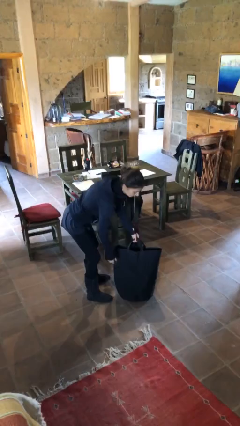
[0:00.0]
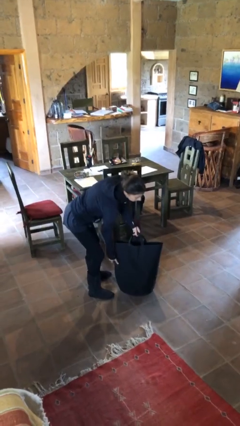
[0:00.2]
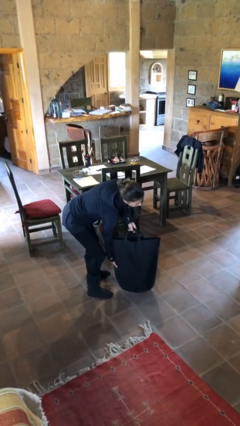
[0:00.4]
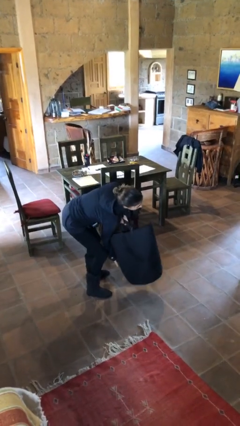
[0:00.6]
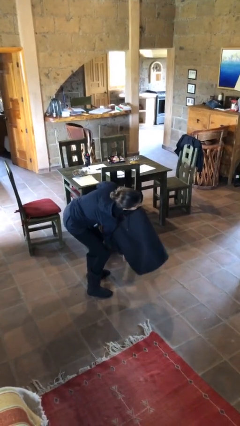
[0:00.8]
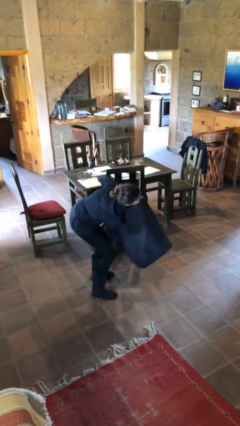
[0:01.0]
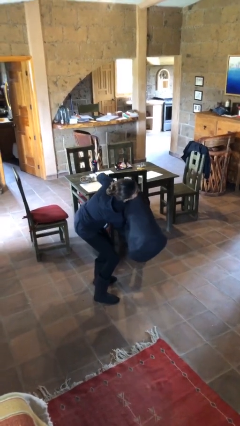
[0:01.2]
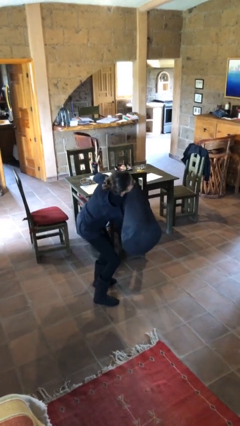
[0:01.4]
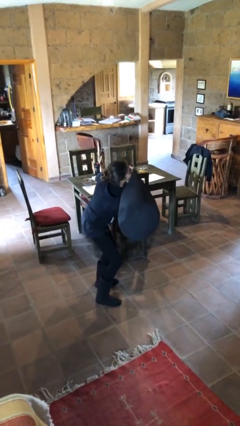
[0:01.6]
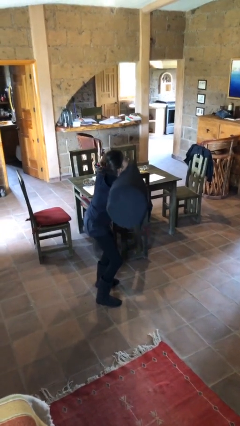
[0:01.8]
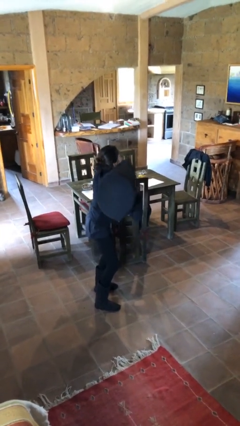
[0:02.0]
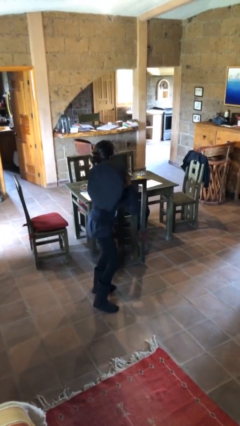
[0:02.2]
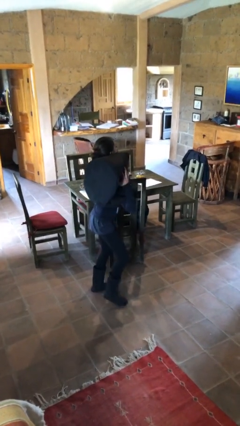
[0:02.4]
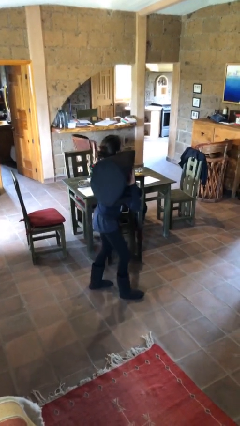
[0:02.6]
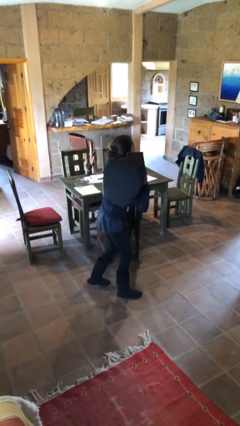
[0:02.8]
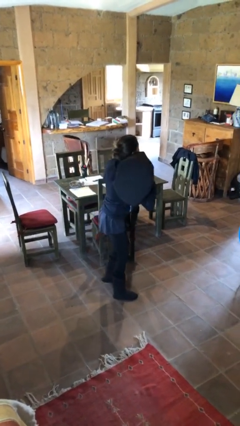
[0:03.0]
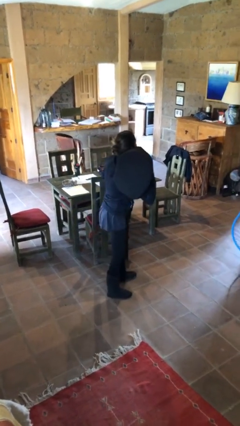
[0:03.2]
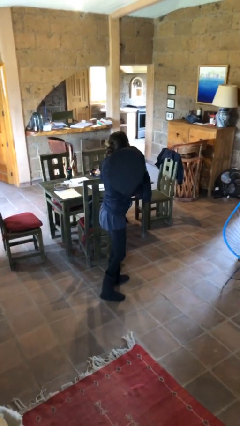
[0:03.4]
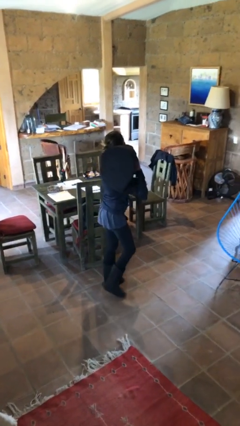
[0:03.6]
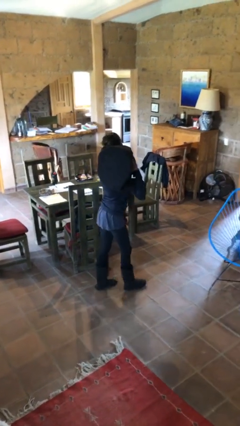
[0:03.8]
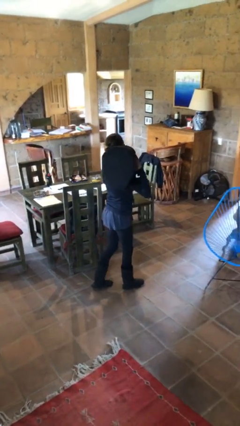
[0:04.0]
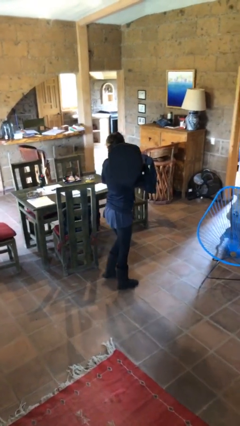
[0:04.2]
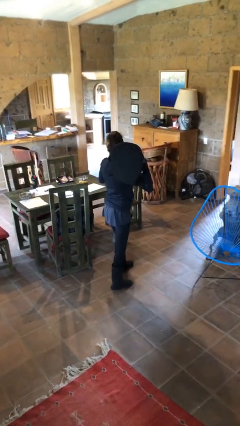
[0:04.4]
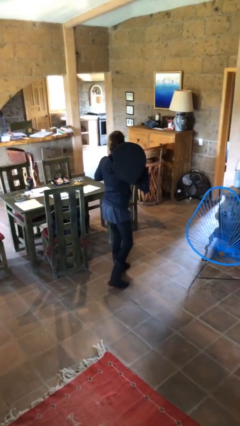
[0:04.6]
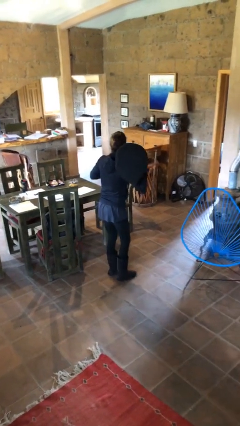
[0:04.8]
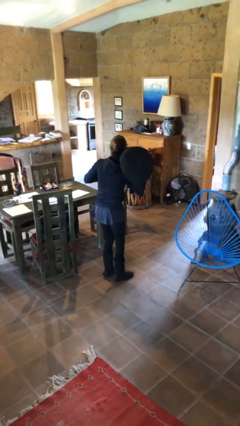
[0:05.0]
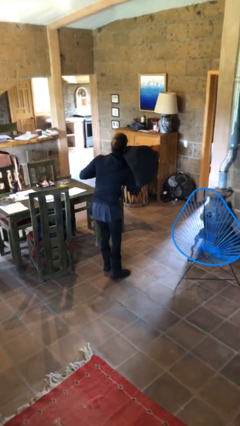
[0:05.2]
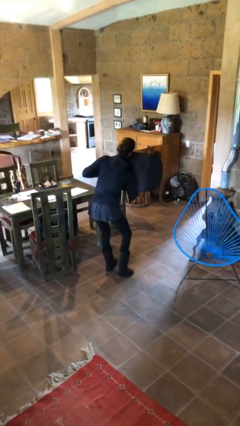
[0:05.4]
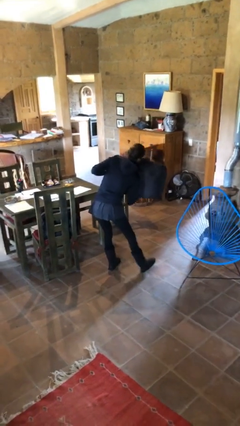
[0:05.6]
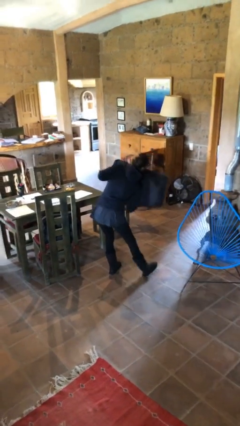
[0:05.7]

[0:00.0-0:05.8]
person carries heavy object

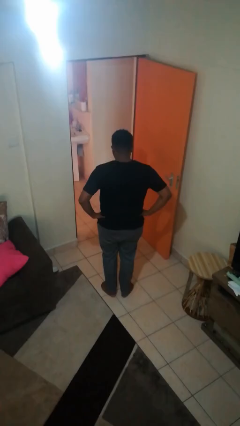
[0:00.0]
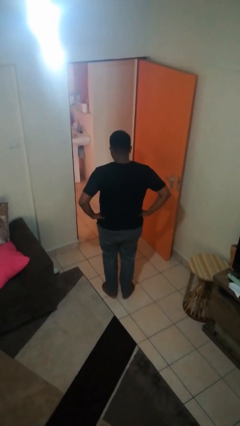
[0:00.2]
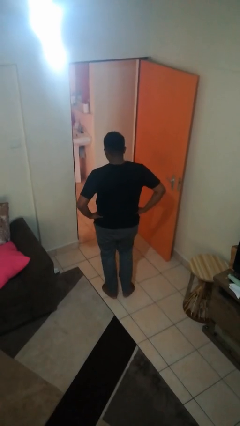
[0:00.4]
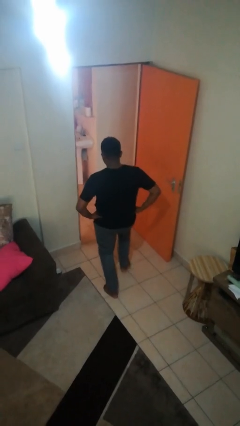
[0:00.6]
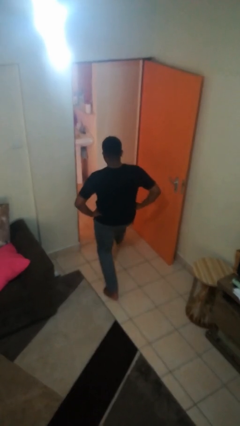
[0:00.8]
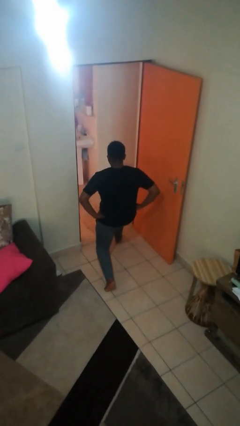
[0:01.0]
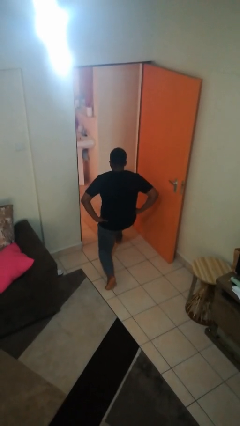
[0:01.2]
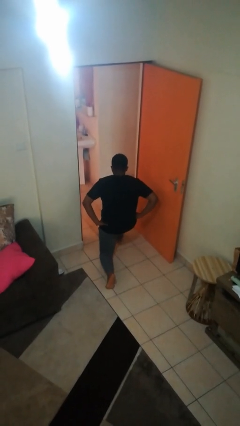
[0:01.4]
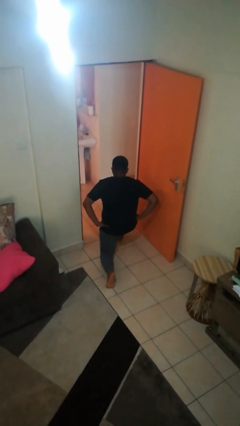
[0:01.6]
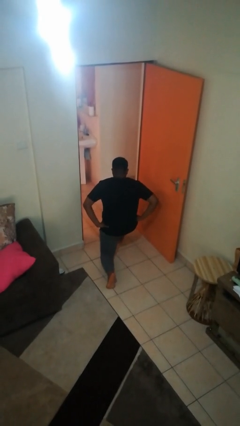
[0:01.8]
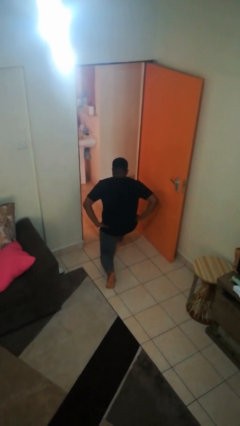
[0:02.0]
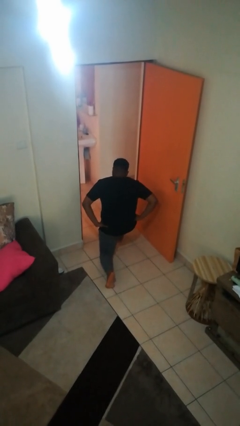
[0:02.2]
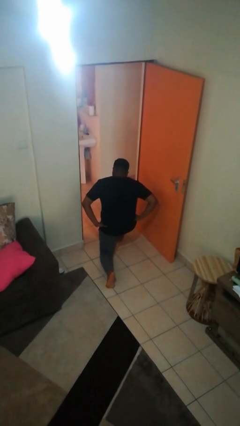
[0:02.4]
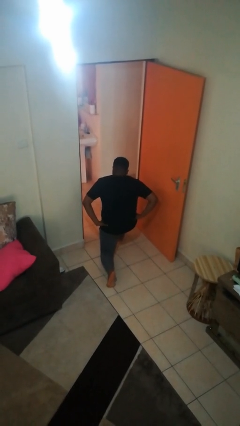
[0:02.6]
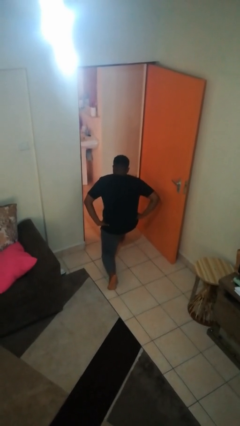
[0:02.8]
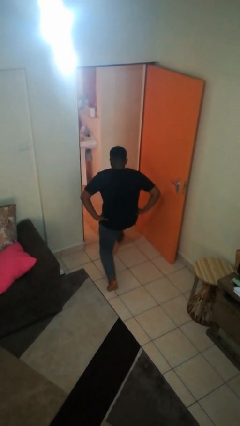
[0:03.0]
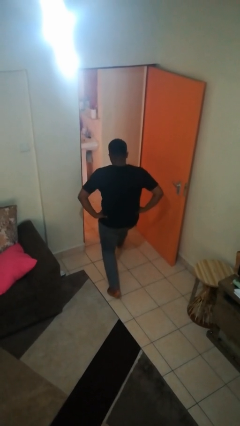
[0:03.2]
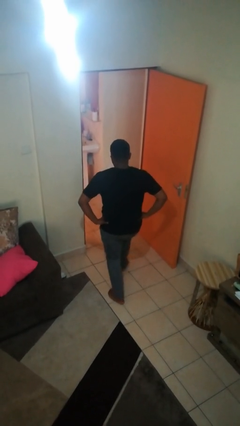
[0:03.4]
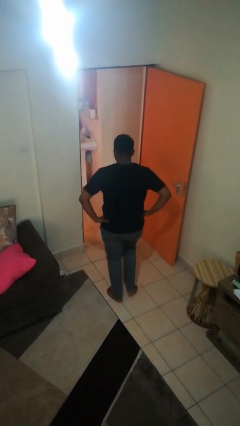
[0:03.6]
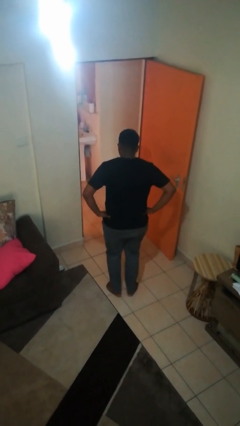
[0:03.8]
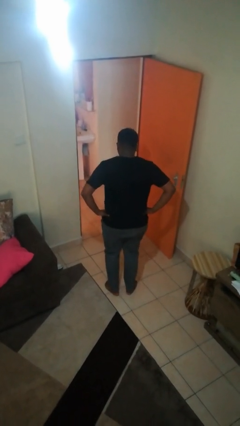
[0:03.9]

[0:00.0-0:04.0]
person exercises with lunges

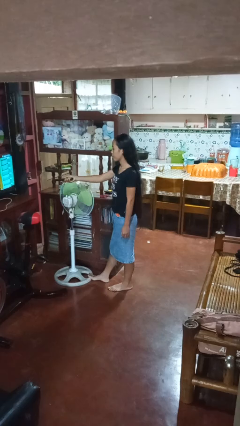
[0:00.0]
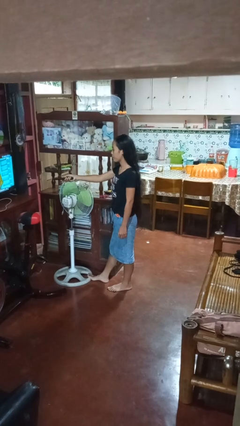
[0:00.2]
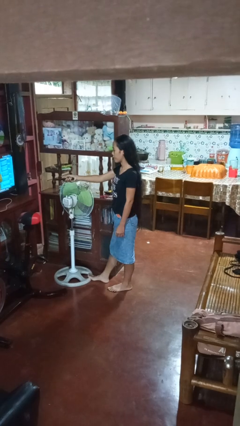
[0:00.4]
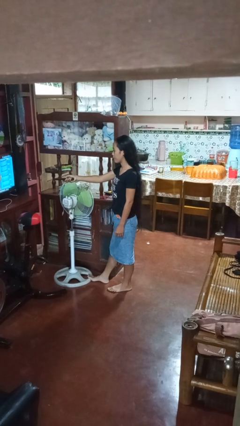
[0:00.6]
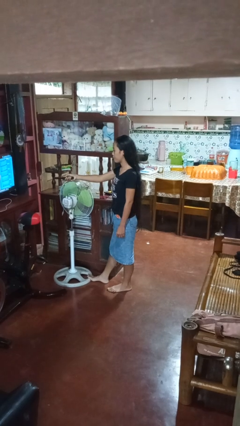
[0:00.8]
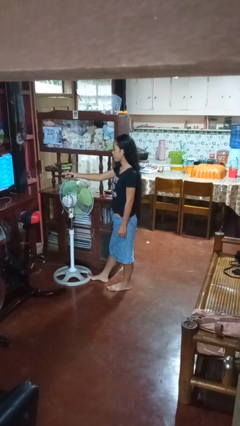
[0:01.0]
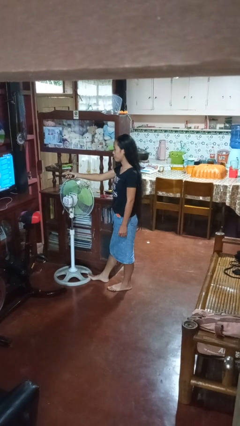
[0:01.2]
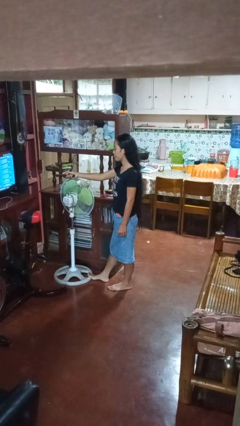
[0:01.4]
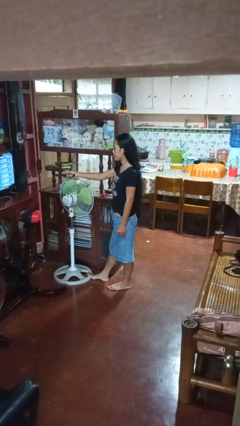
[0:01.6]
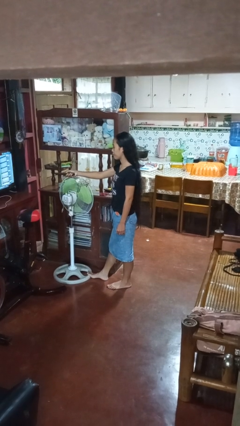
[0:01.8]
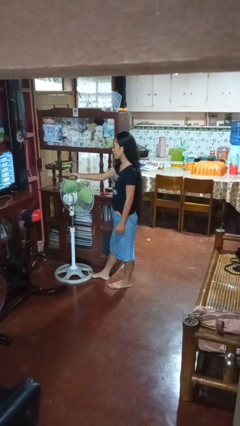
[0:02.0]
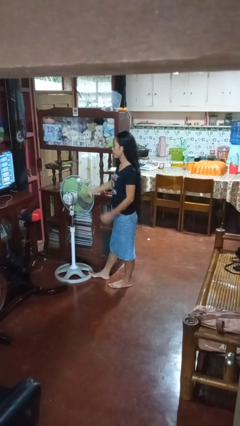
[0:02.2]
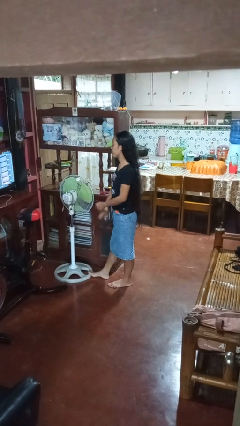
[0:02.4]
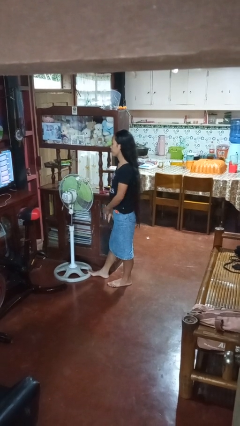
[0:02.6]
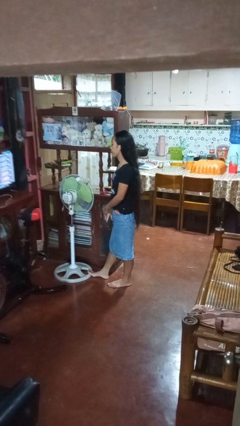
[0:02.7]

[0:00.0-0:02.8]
person uses television remote

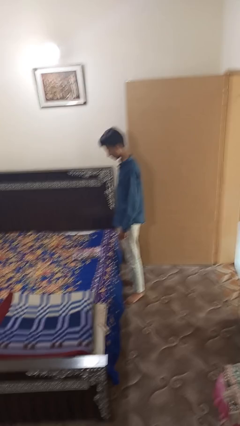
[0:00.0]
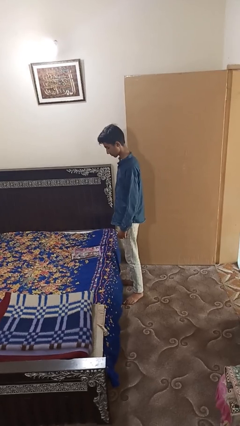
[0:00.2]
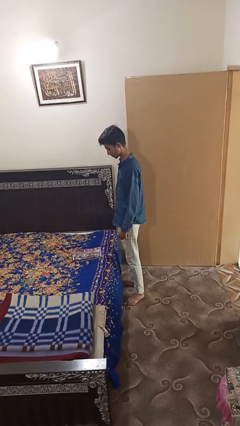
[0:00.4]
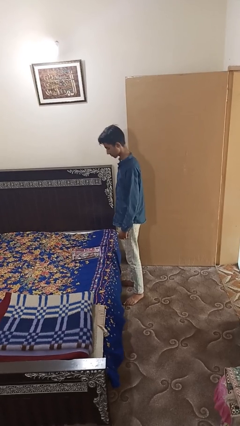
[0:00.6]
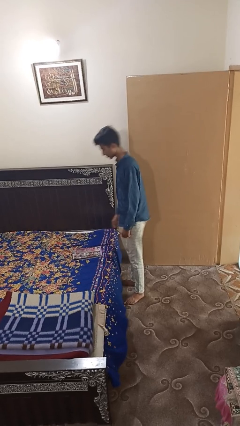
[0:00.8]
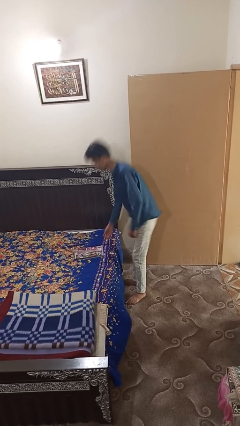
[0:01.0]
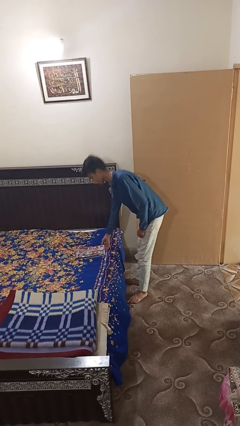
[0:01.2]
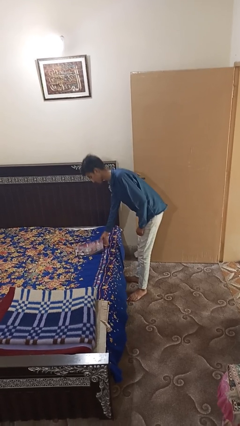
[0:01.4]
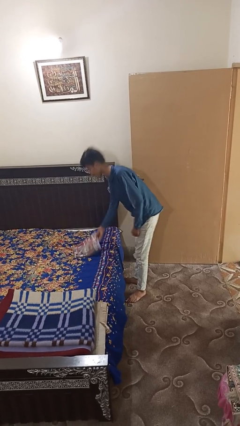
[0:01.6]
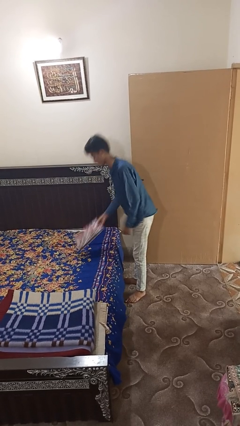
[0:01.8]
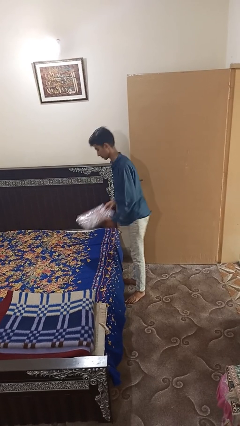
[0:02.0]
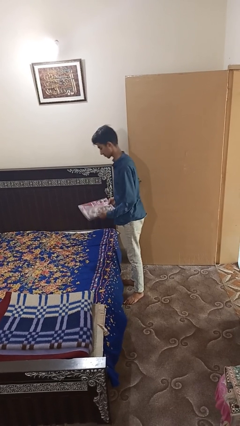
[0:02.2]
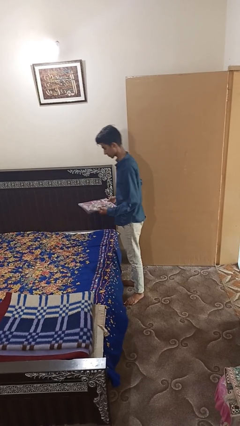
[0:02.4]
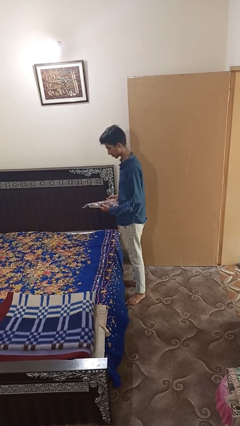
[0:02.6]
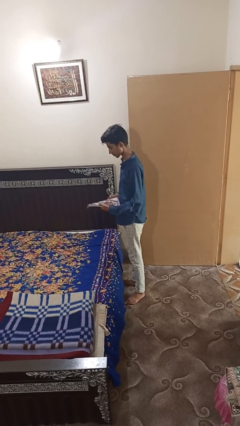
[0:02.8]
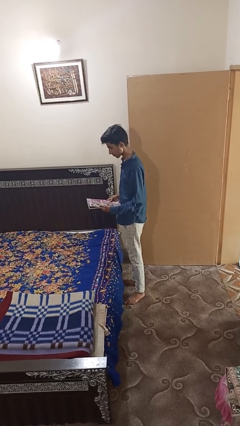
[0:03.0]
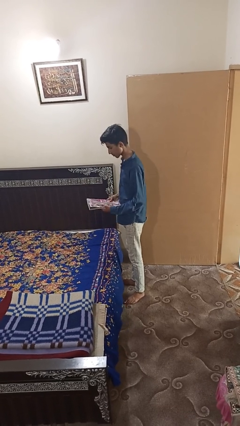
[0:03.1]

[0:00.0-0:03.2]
person picks up object from bed

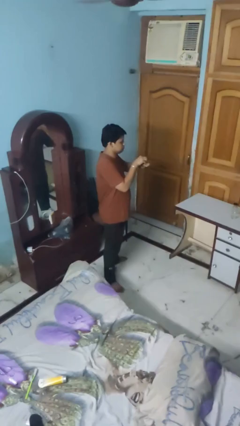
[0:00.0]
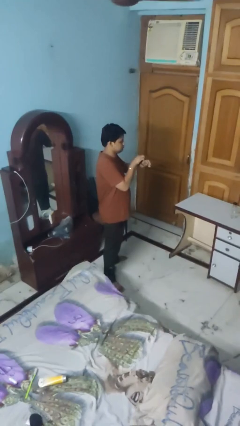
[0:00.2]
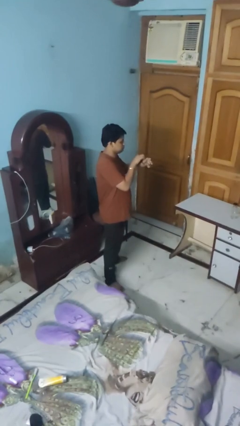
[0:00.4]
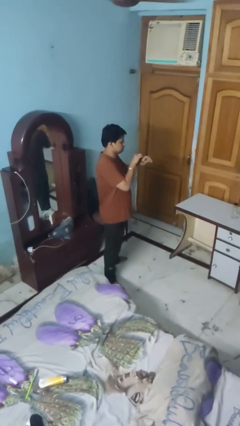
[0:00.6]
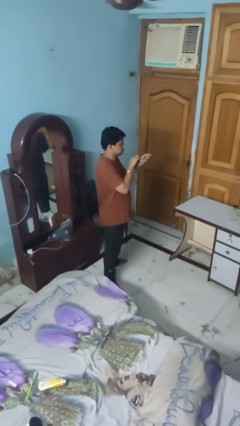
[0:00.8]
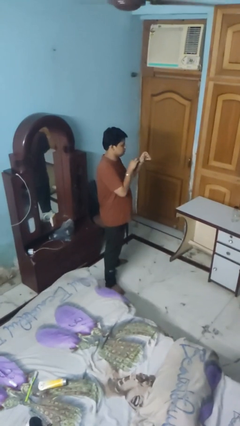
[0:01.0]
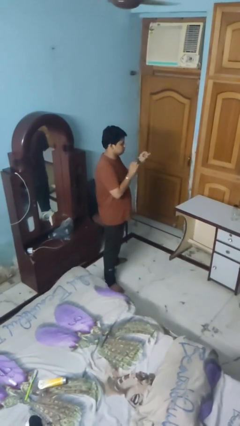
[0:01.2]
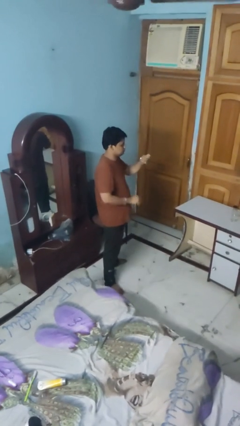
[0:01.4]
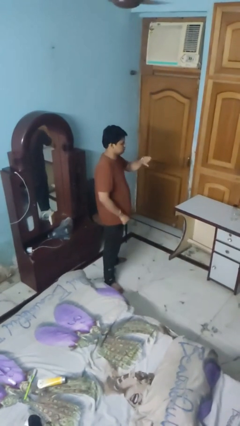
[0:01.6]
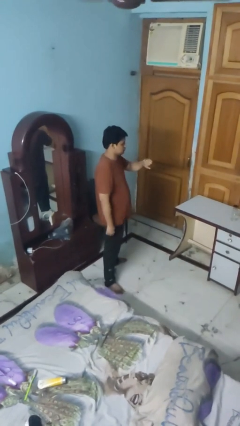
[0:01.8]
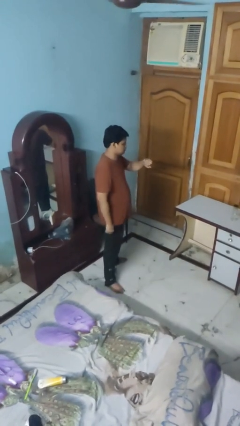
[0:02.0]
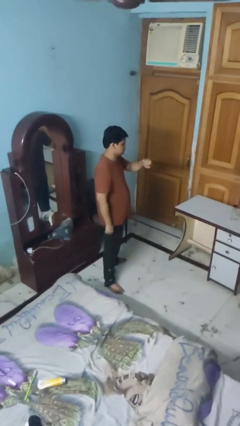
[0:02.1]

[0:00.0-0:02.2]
person puts on wristwatch
